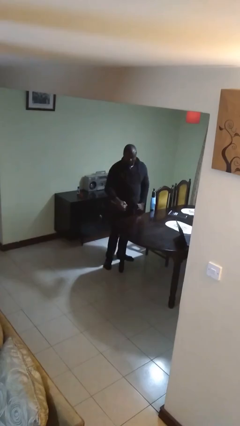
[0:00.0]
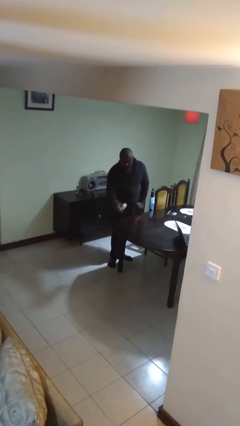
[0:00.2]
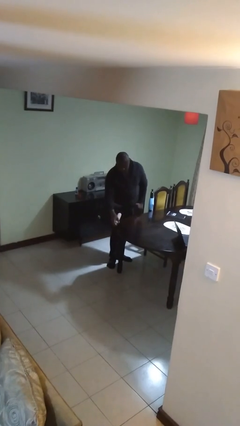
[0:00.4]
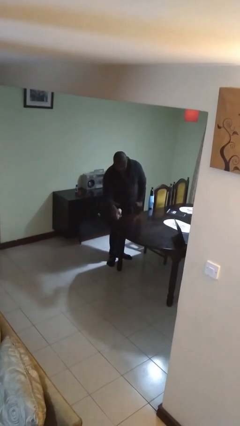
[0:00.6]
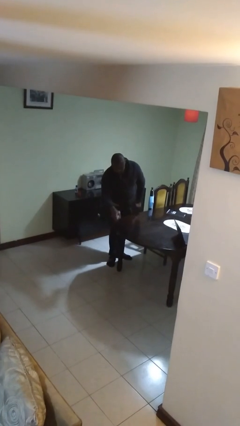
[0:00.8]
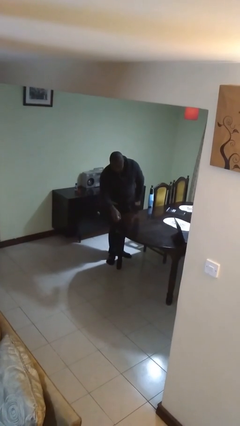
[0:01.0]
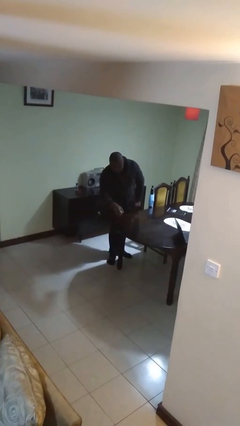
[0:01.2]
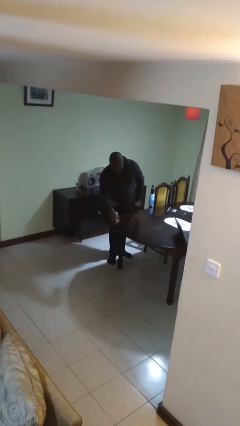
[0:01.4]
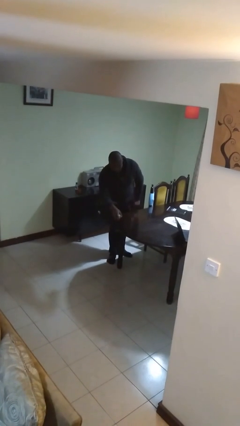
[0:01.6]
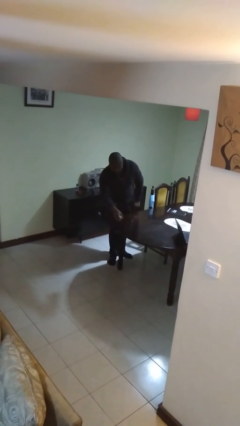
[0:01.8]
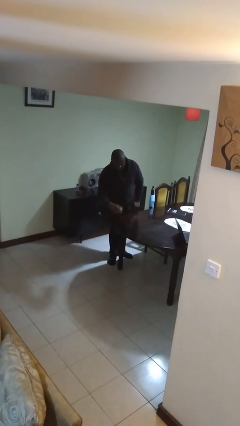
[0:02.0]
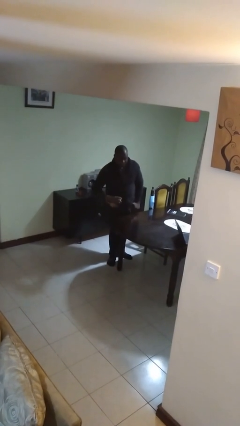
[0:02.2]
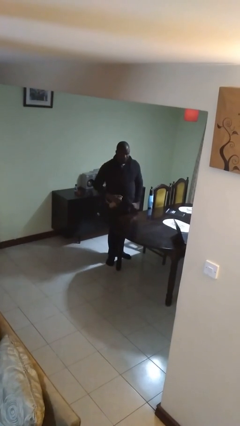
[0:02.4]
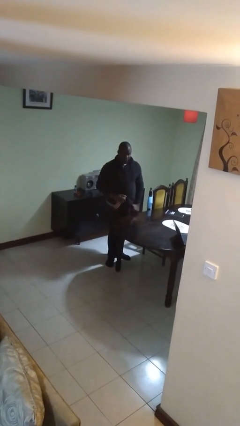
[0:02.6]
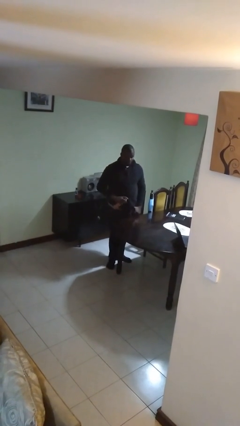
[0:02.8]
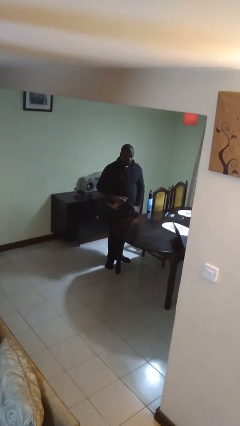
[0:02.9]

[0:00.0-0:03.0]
person sprays from bottle

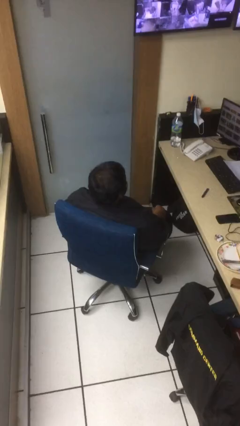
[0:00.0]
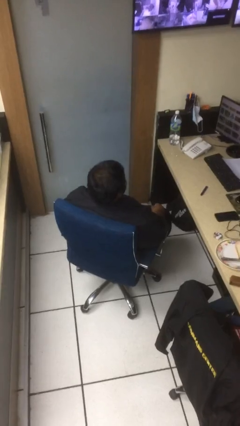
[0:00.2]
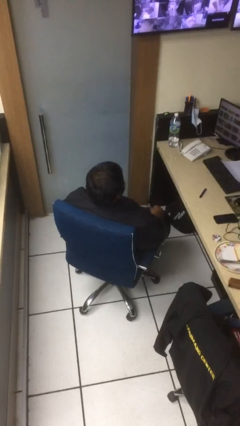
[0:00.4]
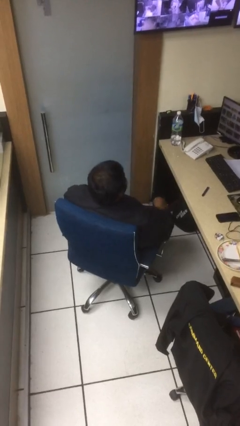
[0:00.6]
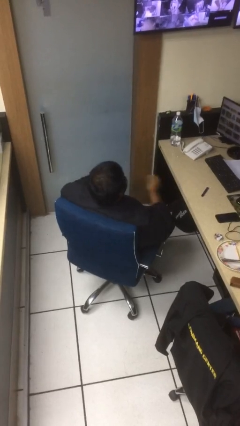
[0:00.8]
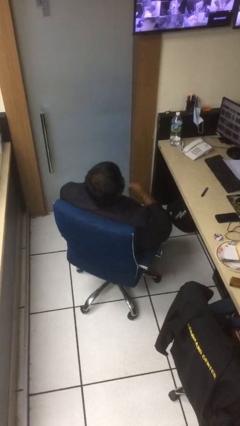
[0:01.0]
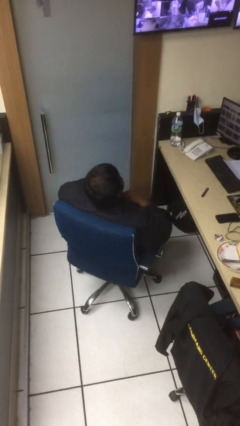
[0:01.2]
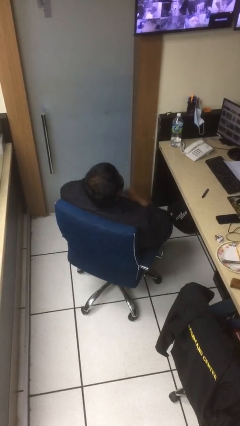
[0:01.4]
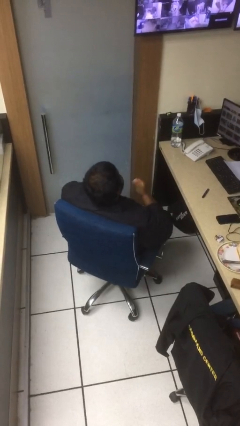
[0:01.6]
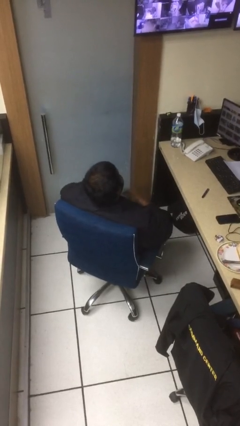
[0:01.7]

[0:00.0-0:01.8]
person drums on chest

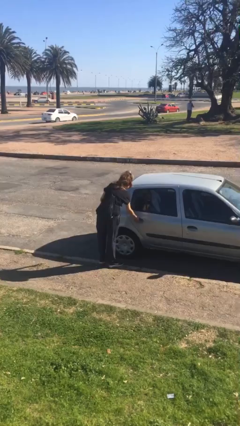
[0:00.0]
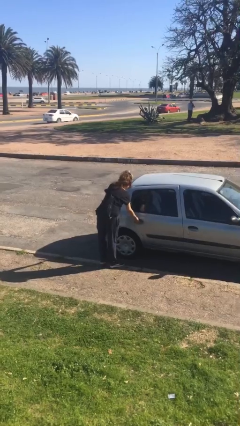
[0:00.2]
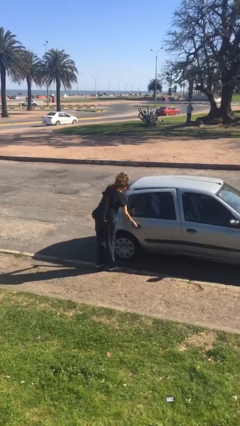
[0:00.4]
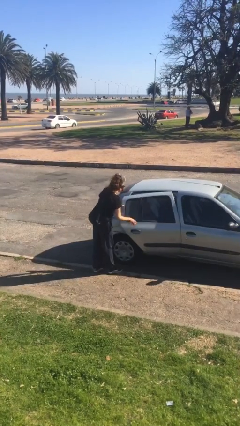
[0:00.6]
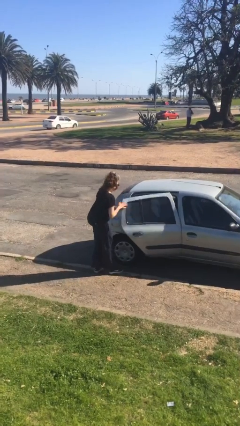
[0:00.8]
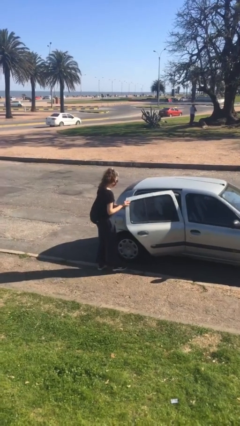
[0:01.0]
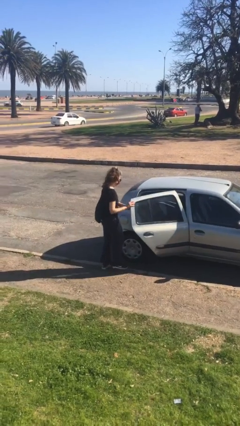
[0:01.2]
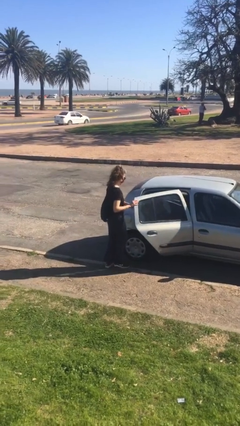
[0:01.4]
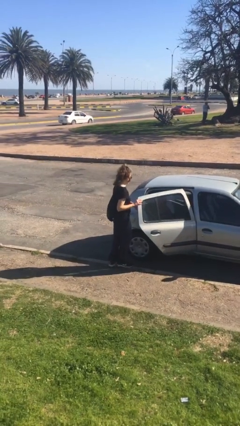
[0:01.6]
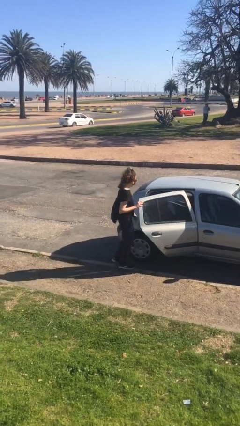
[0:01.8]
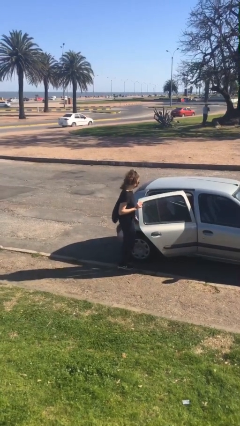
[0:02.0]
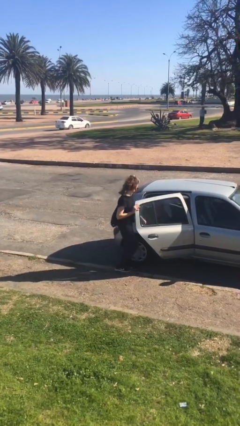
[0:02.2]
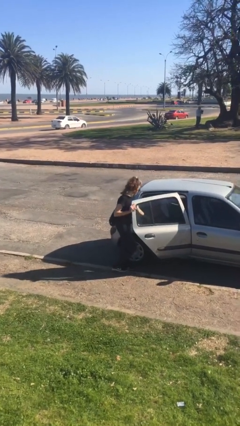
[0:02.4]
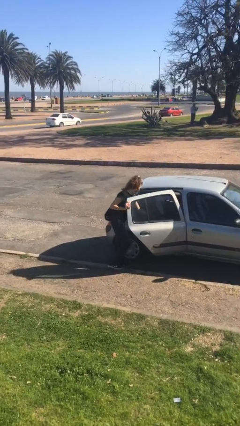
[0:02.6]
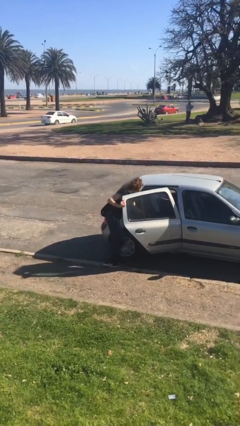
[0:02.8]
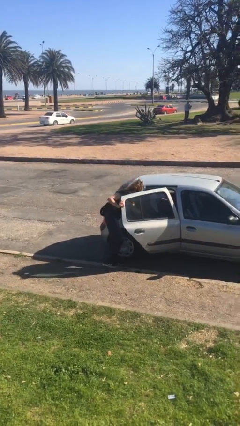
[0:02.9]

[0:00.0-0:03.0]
person opens car door

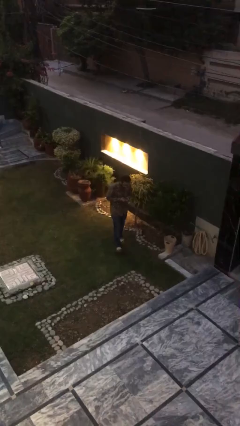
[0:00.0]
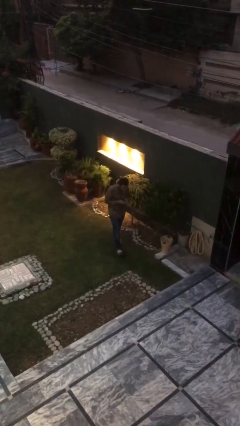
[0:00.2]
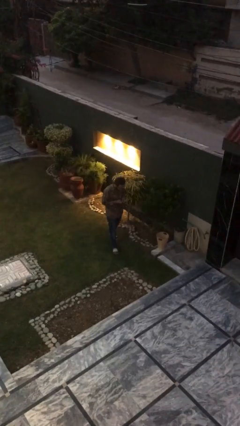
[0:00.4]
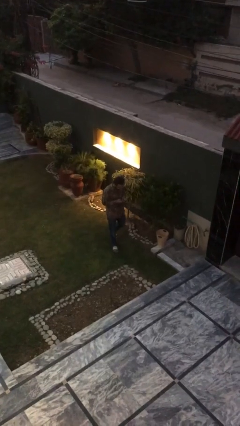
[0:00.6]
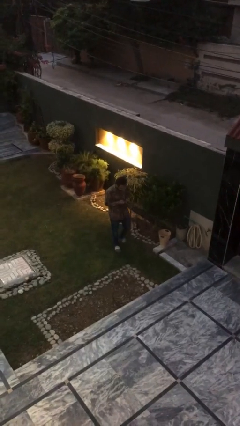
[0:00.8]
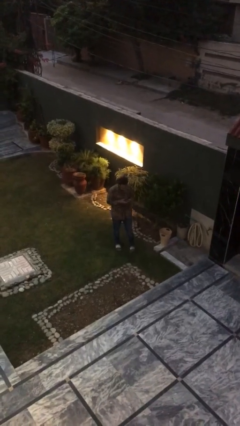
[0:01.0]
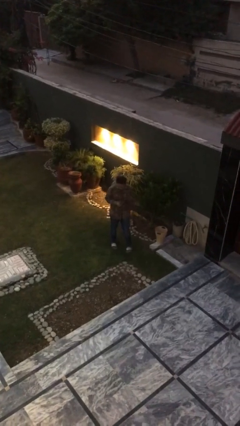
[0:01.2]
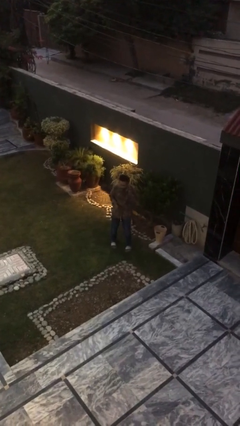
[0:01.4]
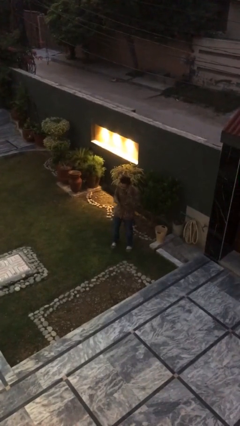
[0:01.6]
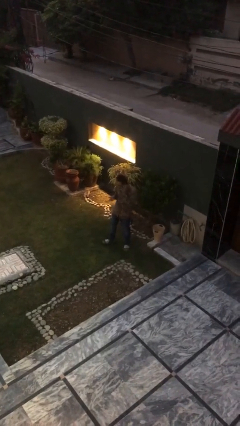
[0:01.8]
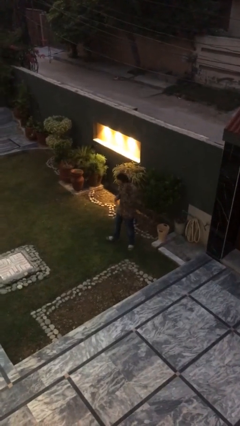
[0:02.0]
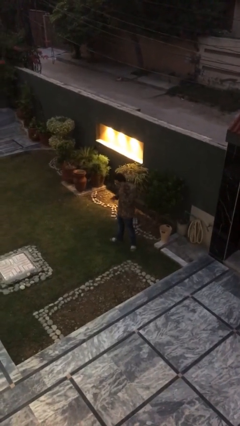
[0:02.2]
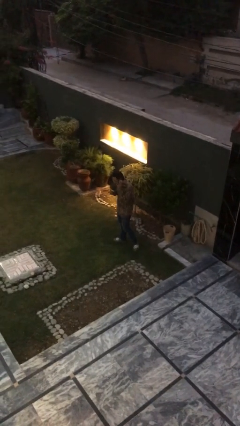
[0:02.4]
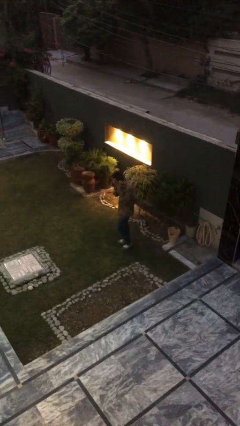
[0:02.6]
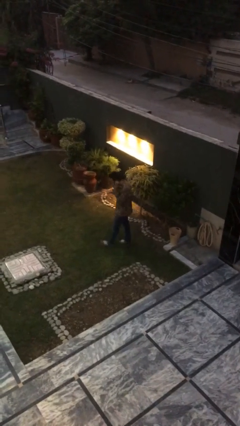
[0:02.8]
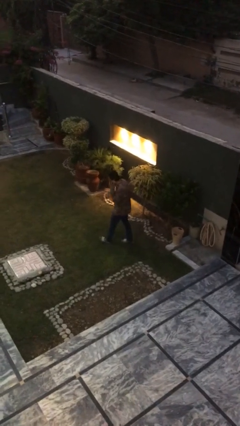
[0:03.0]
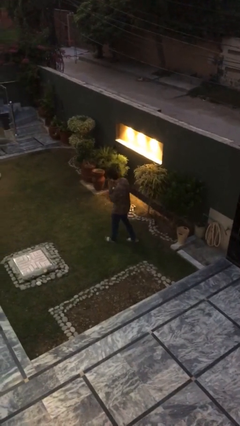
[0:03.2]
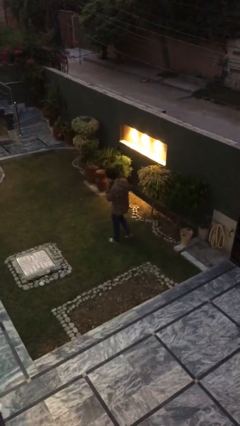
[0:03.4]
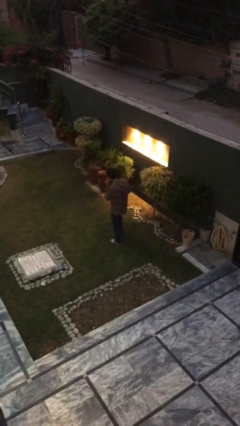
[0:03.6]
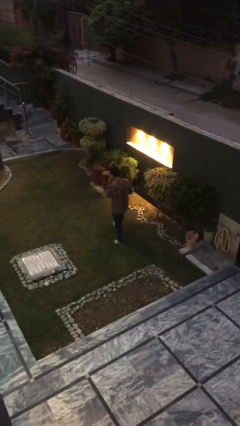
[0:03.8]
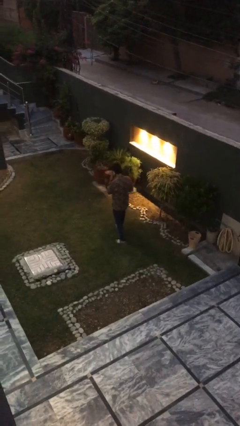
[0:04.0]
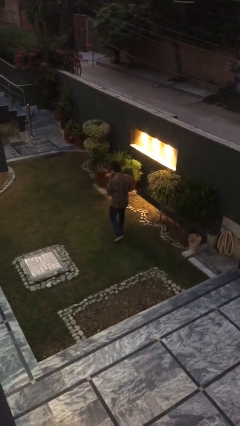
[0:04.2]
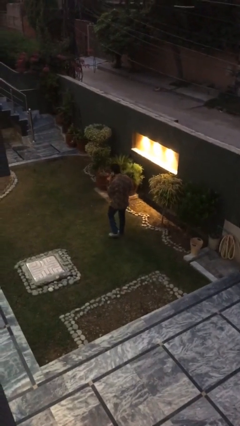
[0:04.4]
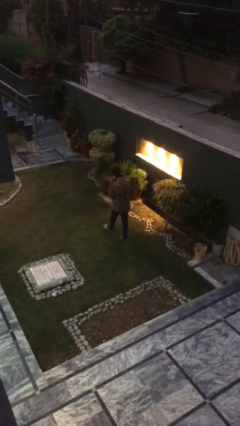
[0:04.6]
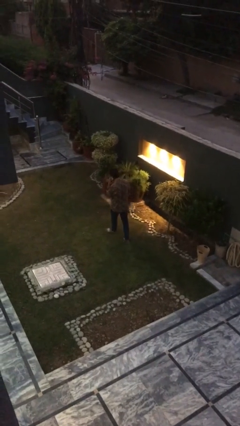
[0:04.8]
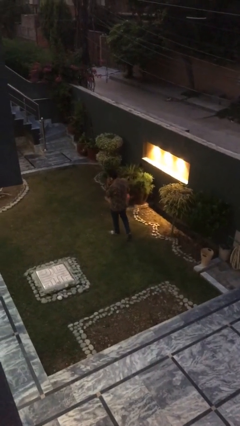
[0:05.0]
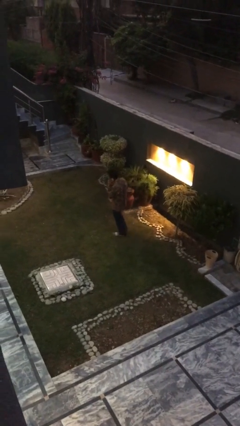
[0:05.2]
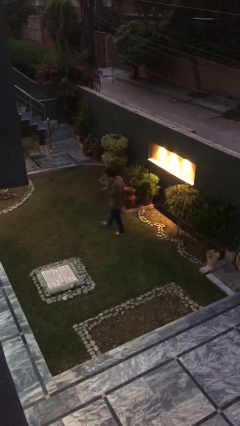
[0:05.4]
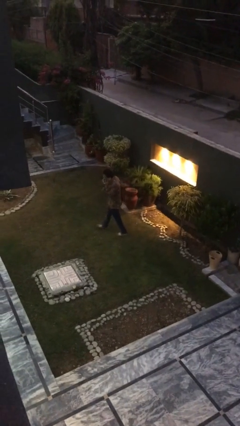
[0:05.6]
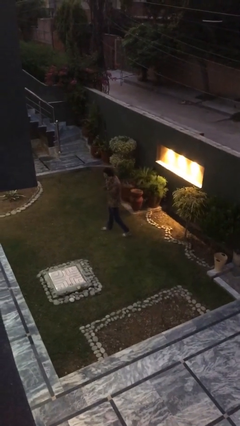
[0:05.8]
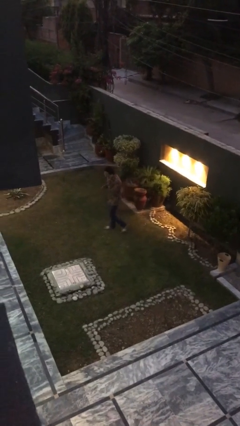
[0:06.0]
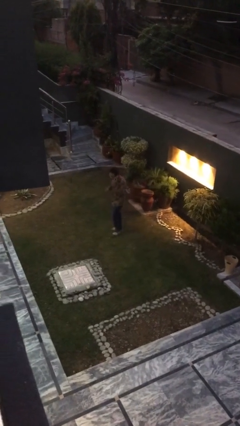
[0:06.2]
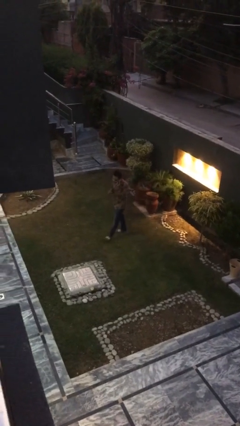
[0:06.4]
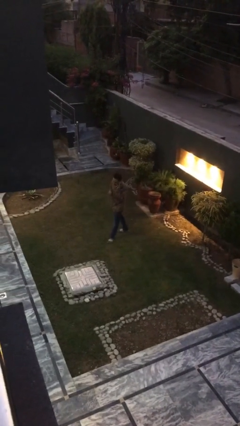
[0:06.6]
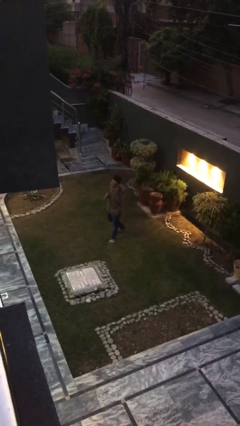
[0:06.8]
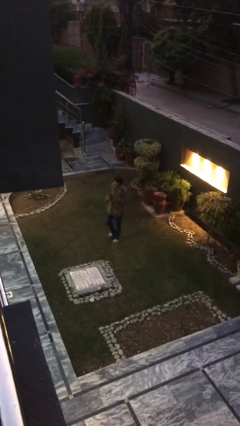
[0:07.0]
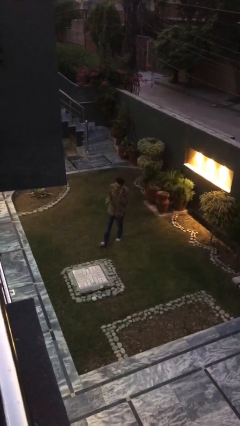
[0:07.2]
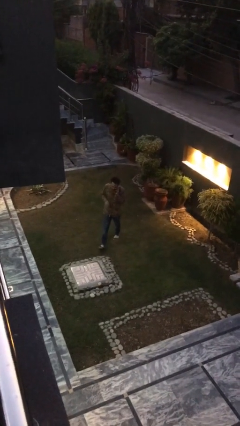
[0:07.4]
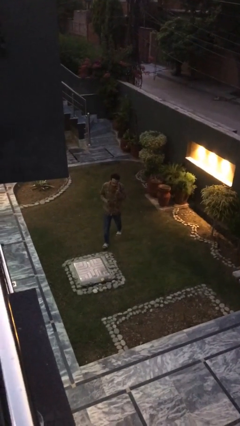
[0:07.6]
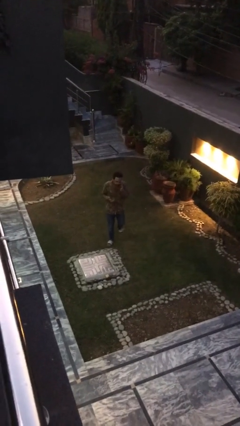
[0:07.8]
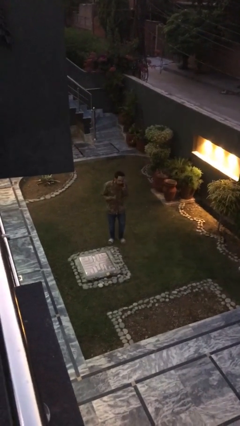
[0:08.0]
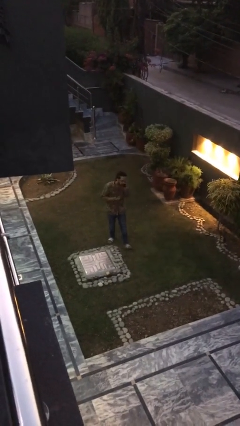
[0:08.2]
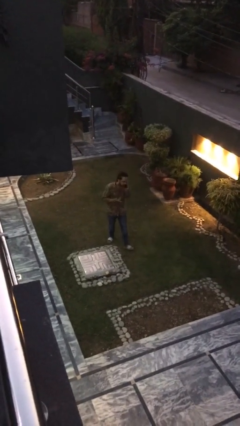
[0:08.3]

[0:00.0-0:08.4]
person talks on phone

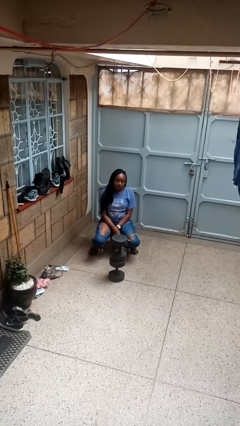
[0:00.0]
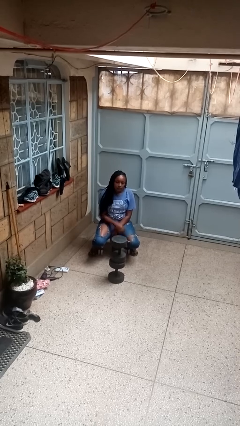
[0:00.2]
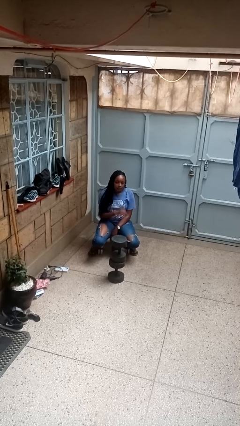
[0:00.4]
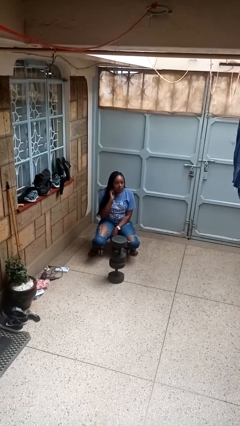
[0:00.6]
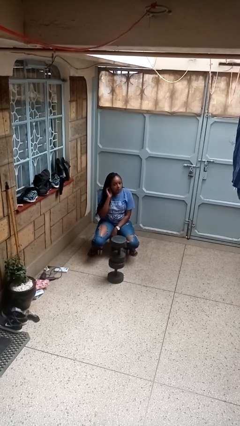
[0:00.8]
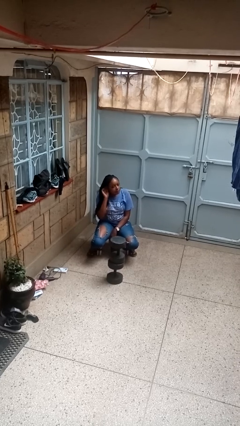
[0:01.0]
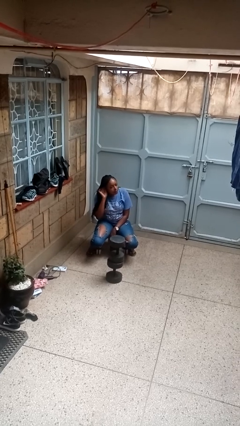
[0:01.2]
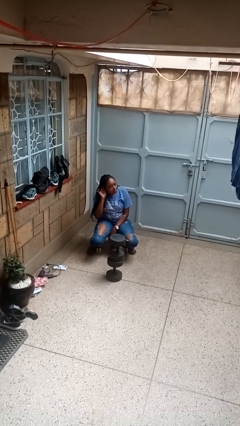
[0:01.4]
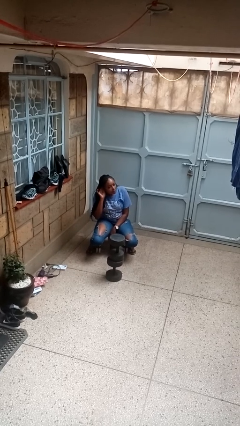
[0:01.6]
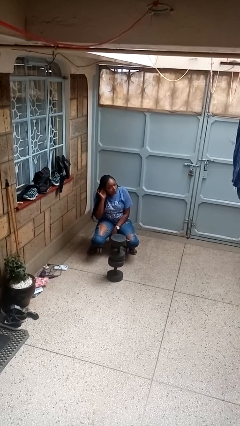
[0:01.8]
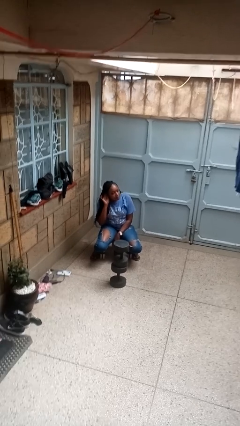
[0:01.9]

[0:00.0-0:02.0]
person gestures listen closely
